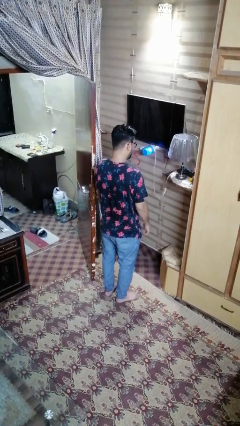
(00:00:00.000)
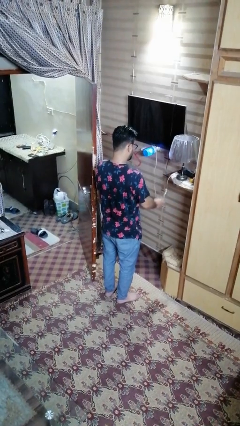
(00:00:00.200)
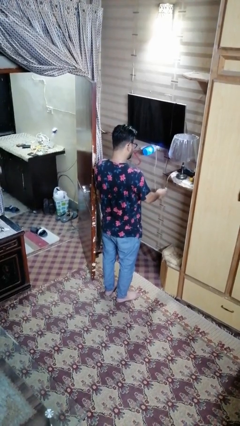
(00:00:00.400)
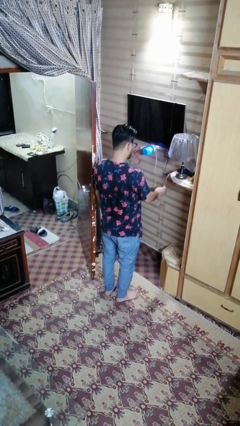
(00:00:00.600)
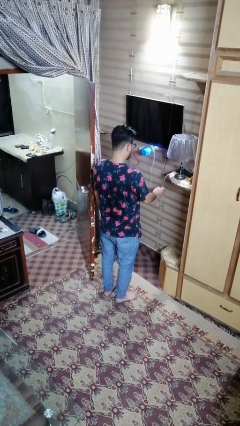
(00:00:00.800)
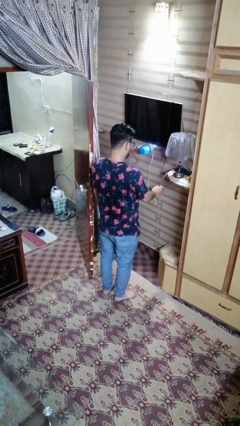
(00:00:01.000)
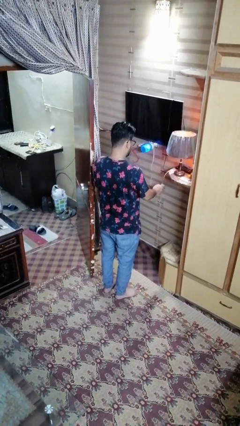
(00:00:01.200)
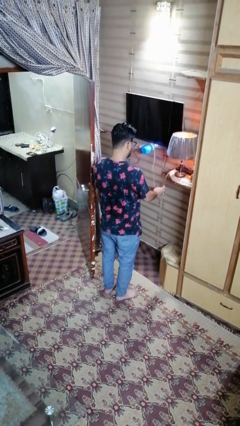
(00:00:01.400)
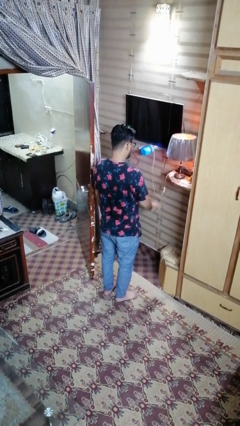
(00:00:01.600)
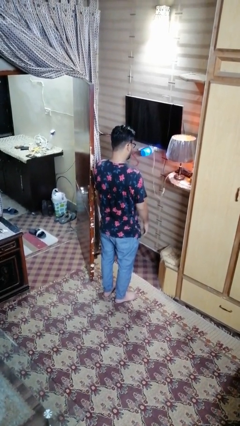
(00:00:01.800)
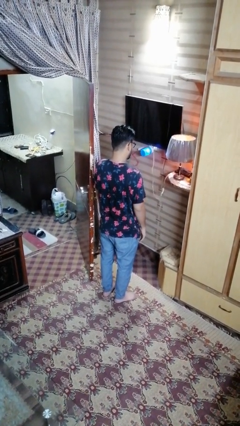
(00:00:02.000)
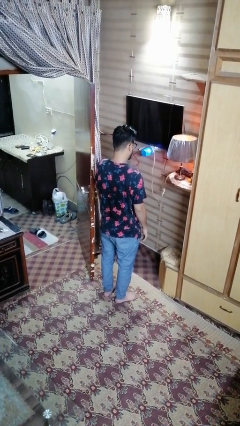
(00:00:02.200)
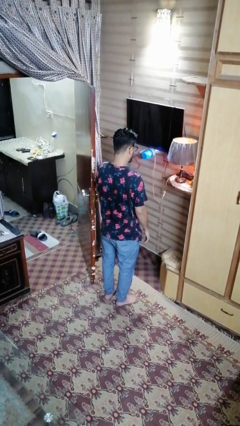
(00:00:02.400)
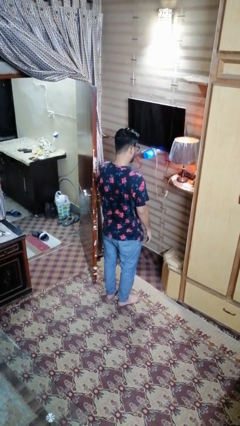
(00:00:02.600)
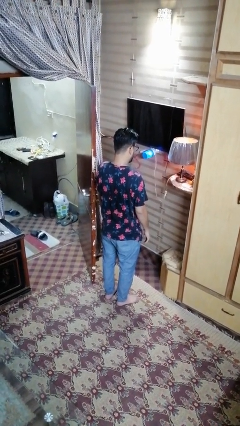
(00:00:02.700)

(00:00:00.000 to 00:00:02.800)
person turns on lamp

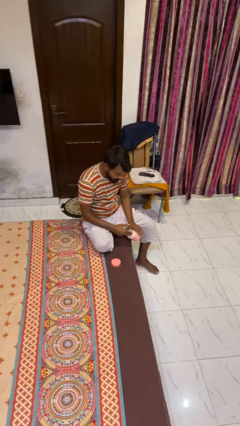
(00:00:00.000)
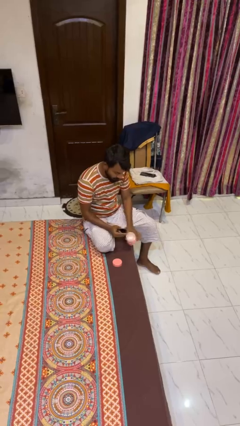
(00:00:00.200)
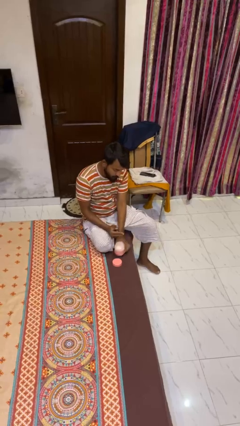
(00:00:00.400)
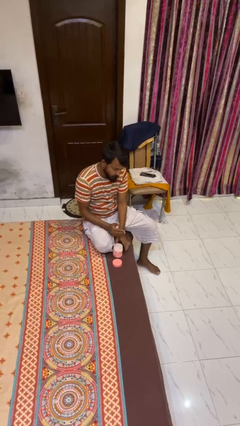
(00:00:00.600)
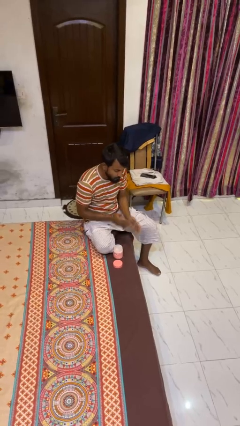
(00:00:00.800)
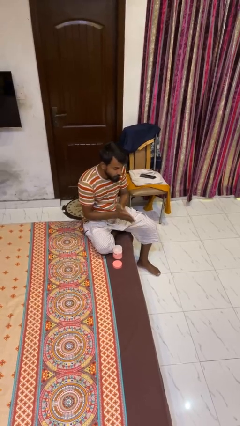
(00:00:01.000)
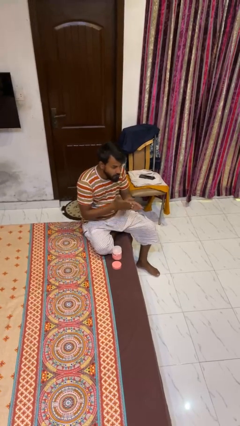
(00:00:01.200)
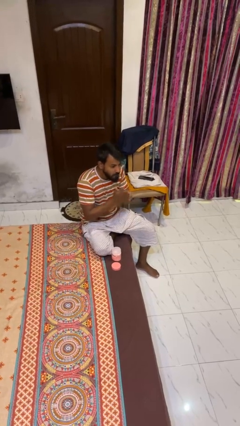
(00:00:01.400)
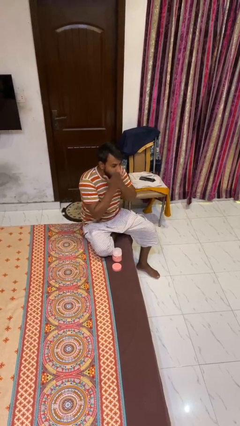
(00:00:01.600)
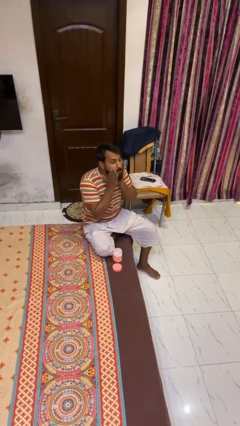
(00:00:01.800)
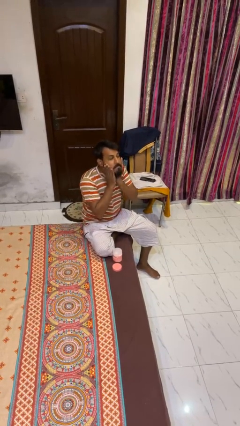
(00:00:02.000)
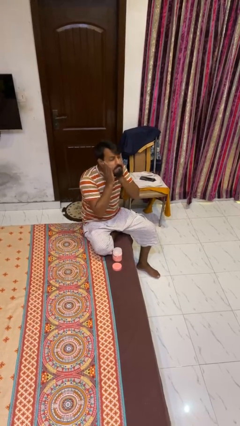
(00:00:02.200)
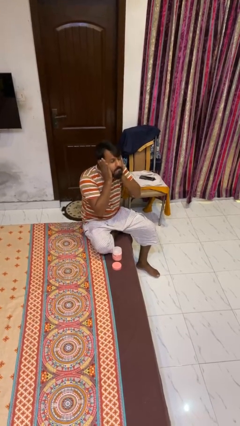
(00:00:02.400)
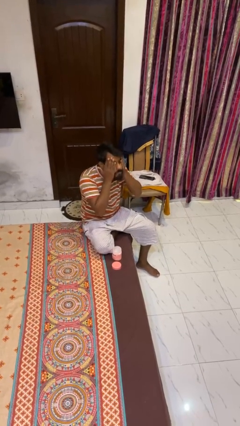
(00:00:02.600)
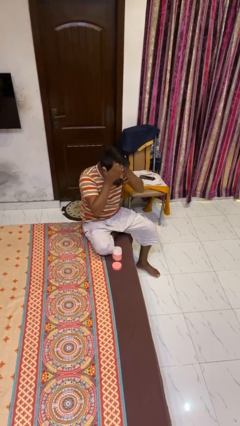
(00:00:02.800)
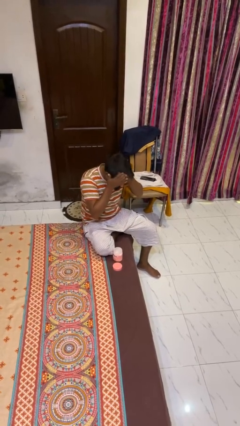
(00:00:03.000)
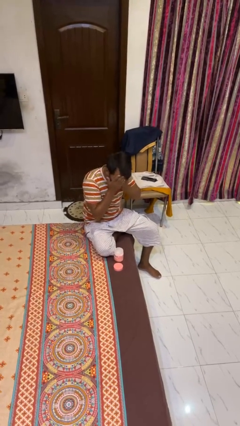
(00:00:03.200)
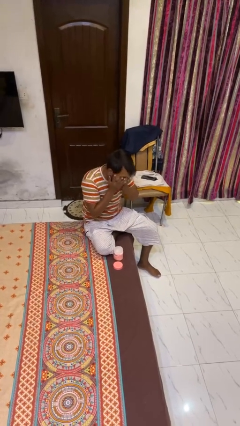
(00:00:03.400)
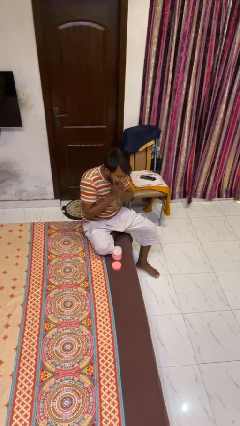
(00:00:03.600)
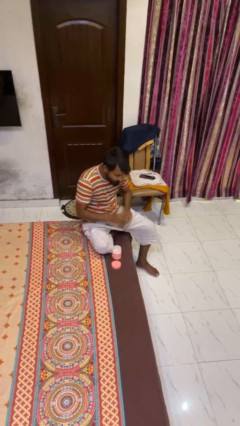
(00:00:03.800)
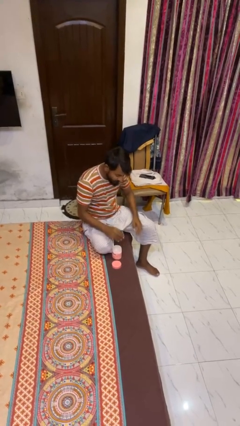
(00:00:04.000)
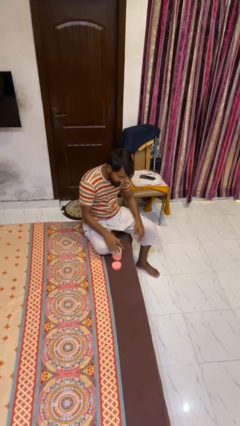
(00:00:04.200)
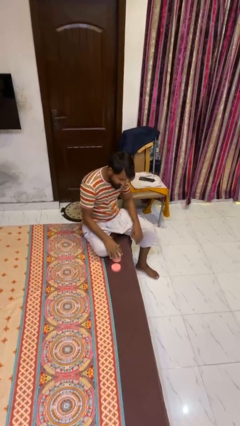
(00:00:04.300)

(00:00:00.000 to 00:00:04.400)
person applies facial moisturizer

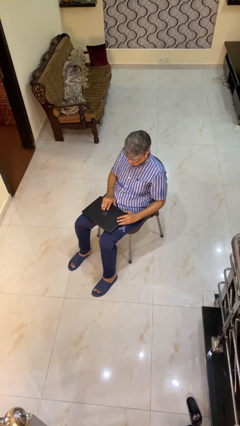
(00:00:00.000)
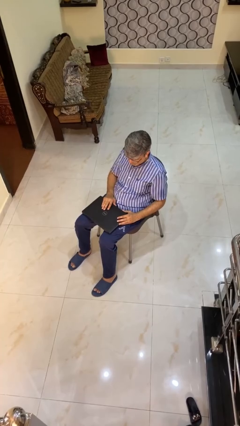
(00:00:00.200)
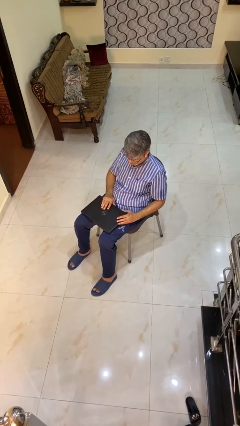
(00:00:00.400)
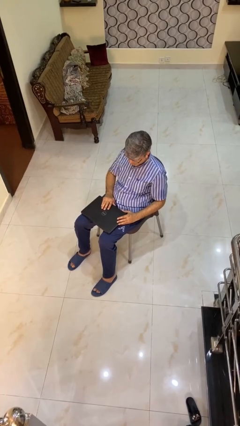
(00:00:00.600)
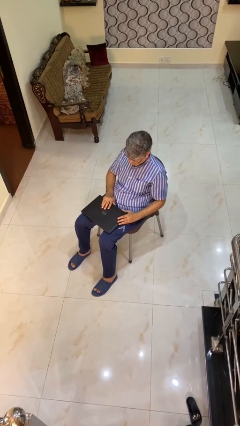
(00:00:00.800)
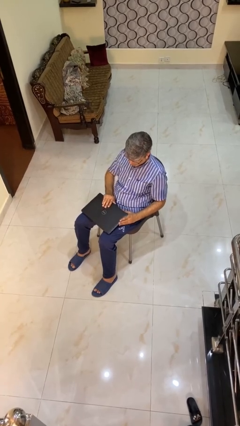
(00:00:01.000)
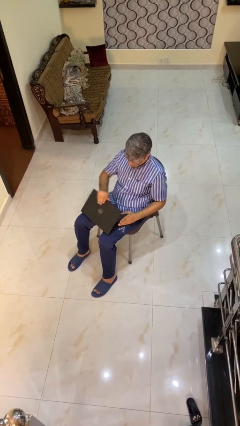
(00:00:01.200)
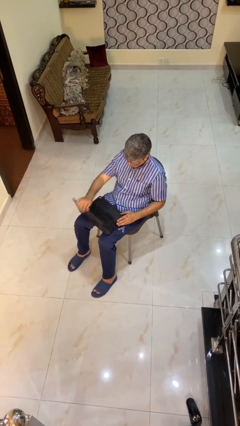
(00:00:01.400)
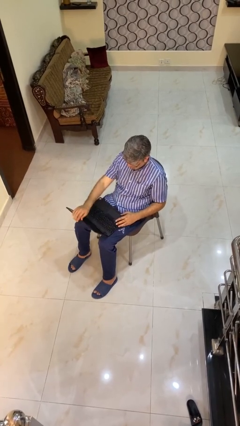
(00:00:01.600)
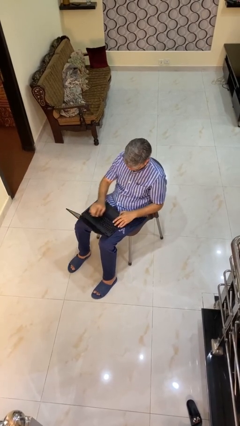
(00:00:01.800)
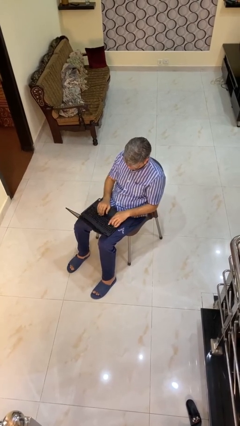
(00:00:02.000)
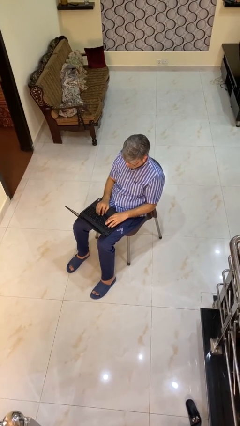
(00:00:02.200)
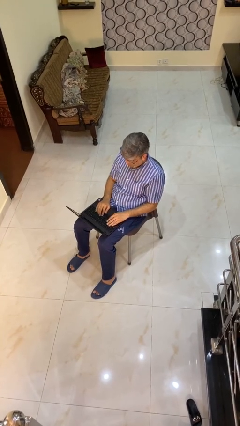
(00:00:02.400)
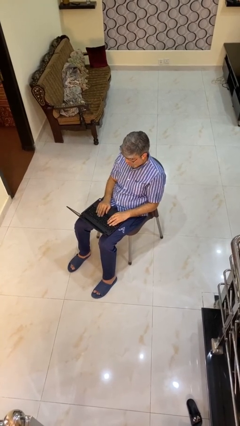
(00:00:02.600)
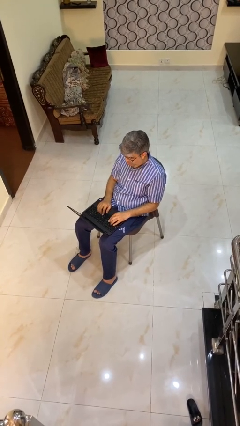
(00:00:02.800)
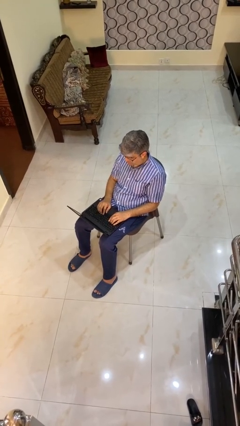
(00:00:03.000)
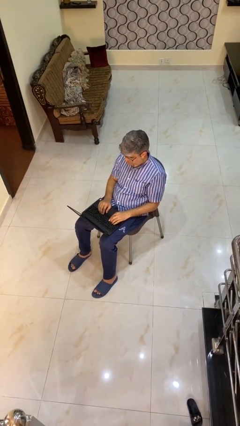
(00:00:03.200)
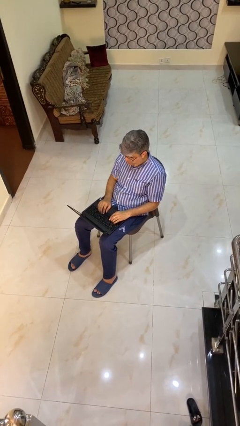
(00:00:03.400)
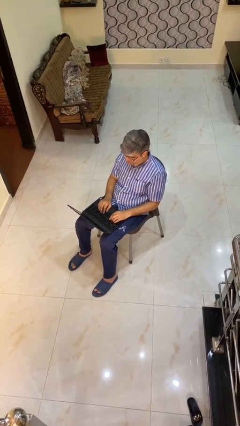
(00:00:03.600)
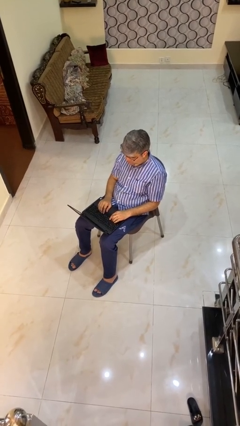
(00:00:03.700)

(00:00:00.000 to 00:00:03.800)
person opens laptop

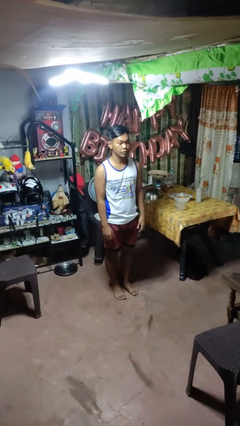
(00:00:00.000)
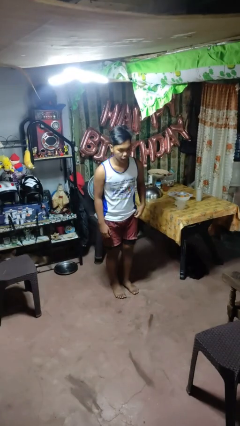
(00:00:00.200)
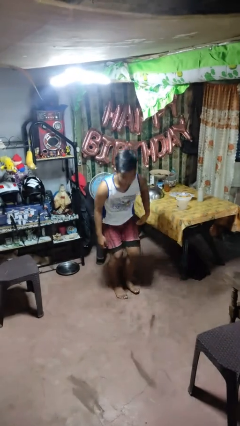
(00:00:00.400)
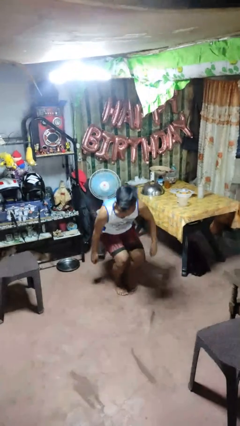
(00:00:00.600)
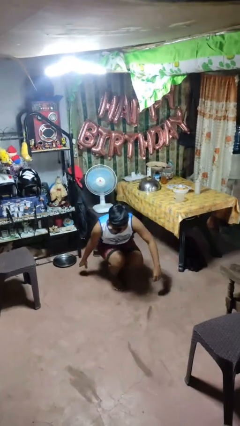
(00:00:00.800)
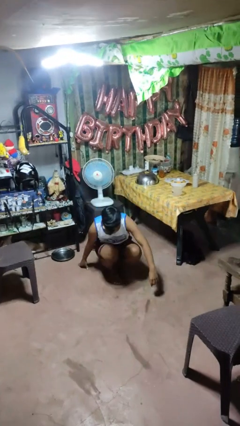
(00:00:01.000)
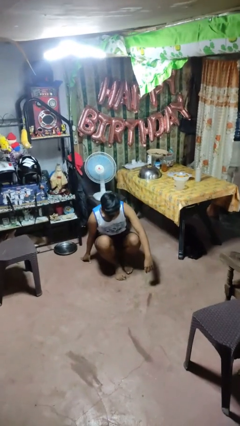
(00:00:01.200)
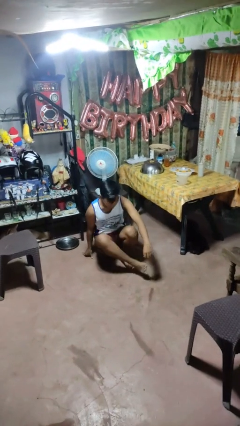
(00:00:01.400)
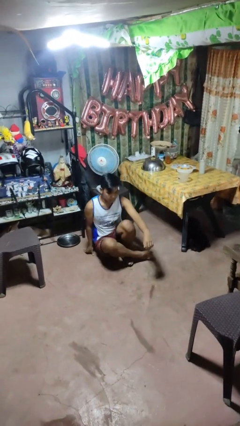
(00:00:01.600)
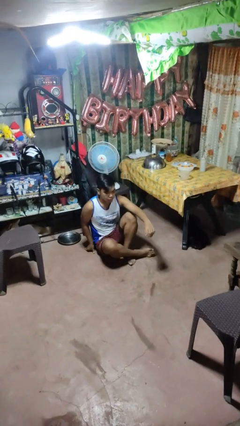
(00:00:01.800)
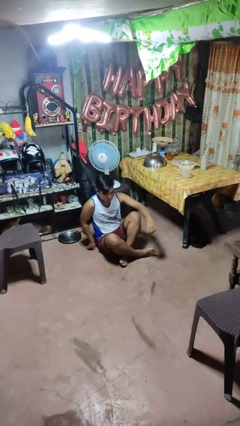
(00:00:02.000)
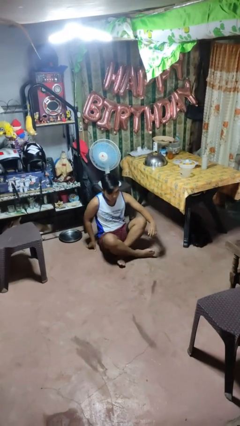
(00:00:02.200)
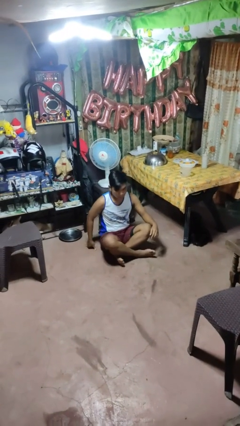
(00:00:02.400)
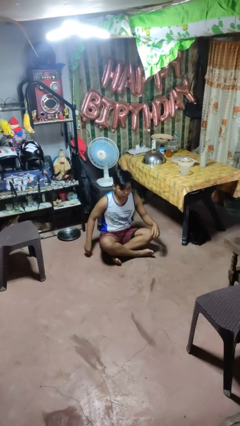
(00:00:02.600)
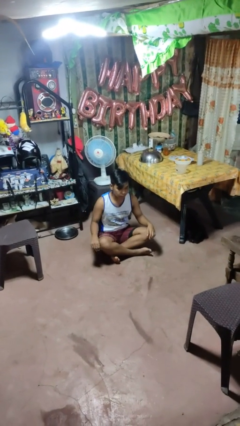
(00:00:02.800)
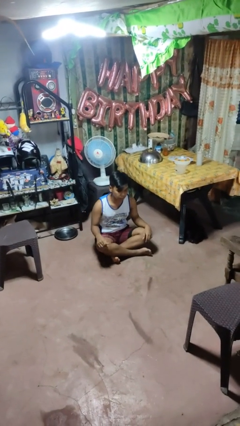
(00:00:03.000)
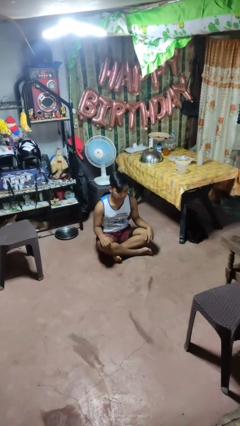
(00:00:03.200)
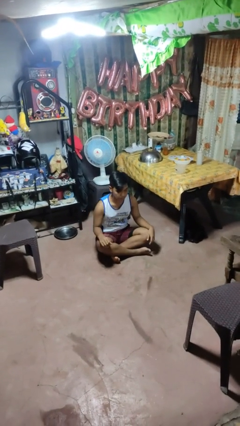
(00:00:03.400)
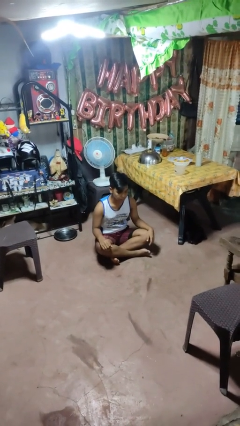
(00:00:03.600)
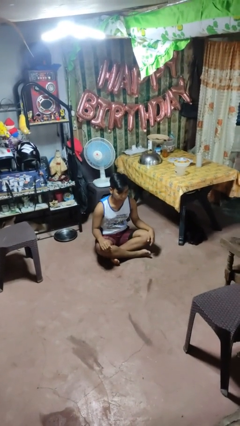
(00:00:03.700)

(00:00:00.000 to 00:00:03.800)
person sits crisscross

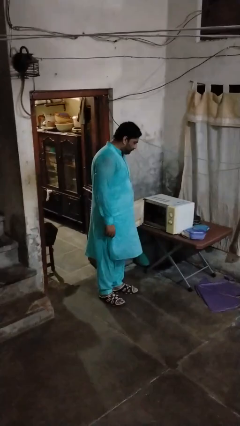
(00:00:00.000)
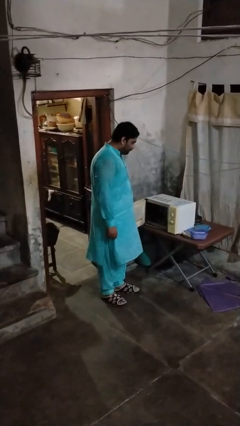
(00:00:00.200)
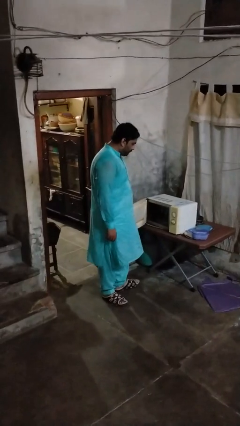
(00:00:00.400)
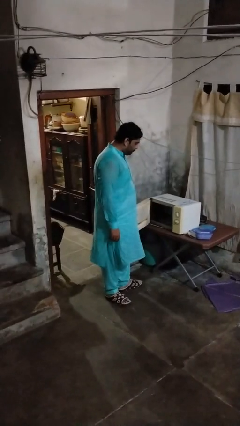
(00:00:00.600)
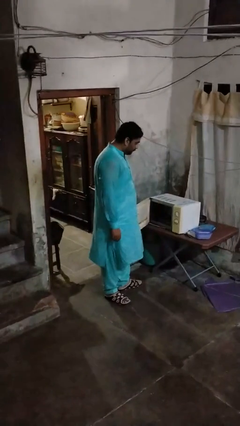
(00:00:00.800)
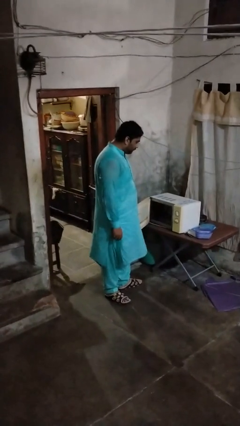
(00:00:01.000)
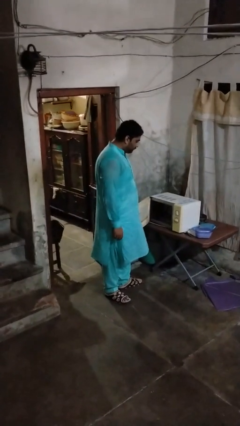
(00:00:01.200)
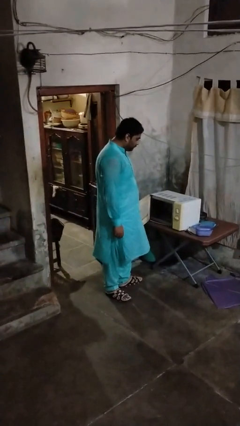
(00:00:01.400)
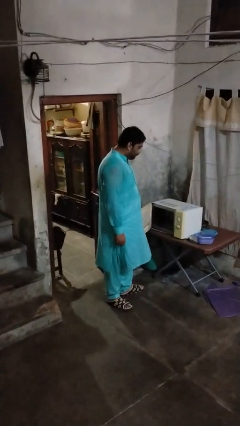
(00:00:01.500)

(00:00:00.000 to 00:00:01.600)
person opens microwave

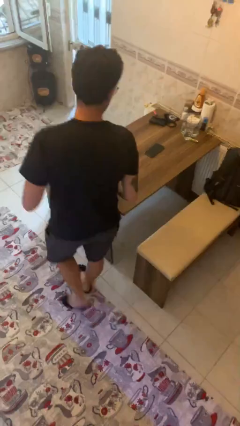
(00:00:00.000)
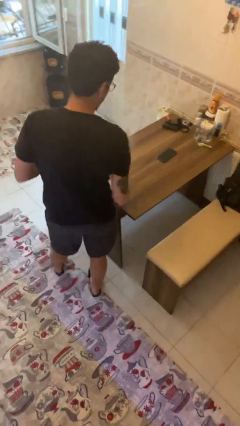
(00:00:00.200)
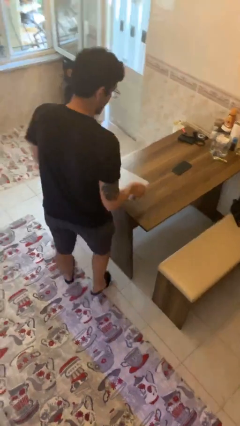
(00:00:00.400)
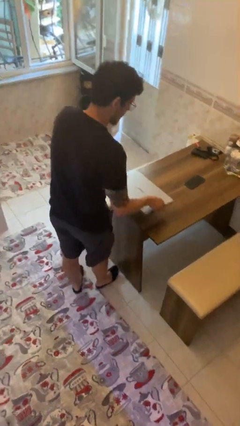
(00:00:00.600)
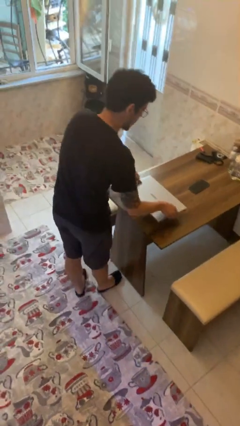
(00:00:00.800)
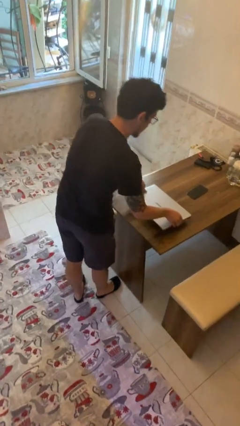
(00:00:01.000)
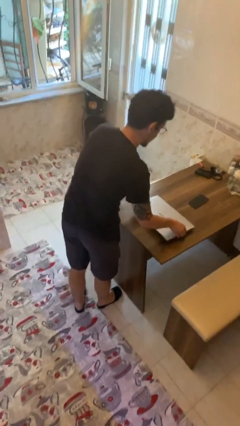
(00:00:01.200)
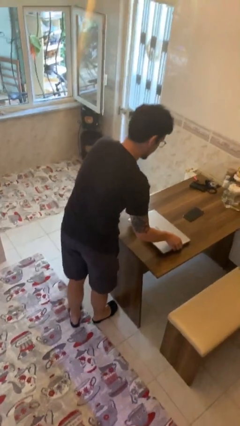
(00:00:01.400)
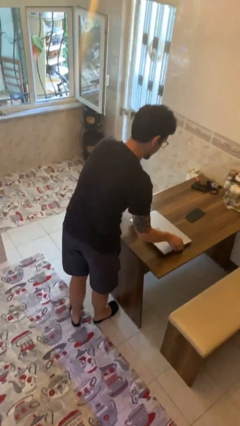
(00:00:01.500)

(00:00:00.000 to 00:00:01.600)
person puts down object on table
